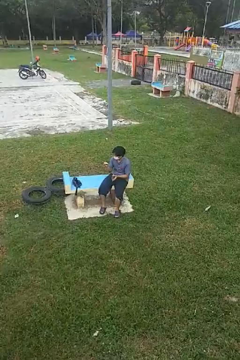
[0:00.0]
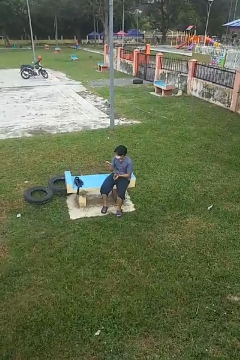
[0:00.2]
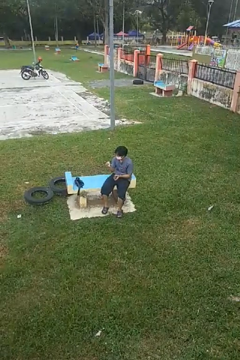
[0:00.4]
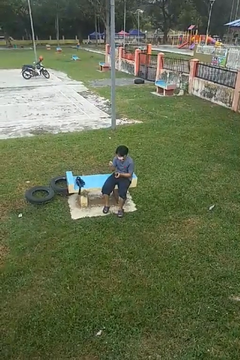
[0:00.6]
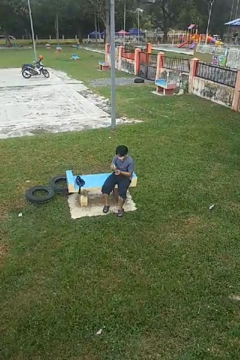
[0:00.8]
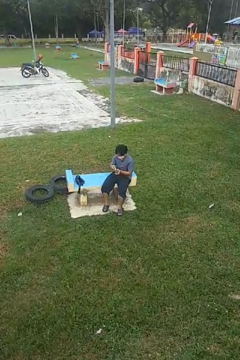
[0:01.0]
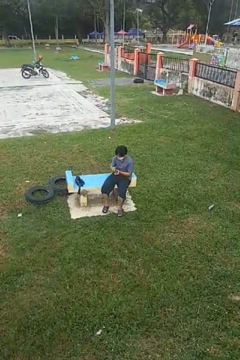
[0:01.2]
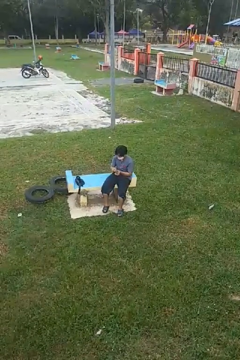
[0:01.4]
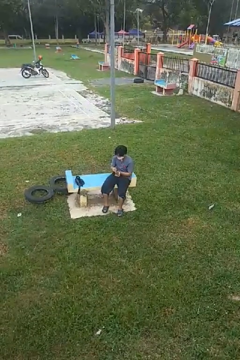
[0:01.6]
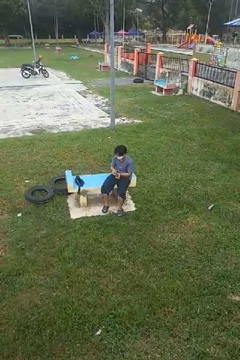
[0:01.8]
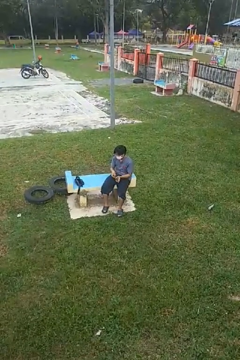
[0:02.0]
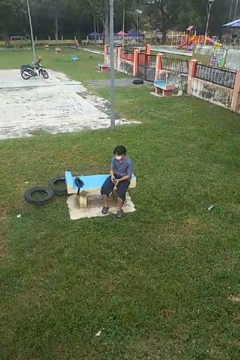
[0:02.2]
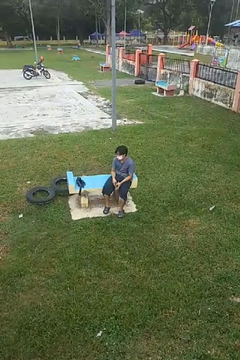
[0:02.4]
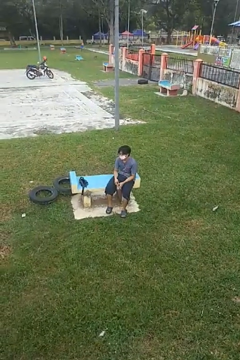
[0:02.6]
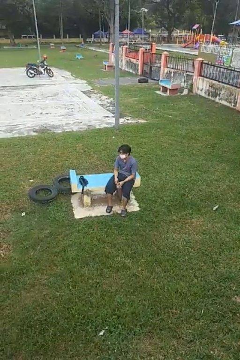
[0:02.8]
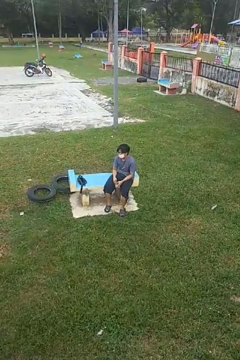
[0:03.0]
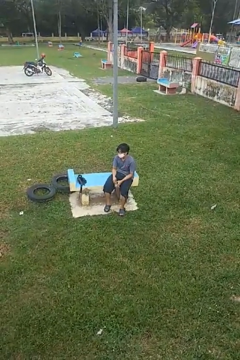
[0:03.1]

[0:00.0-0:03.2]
person puts object into purse

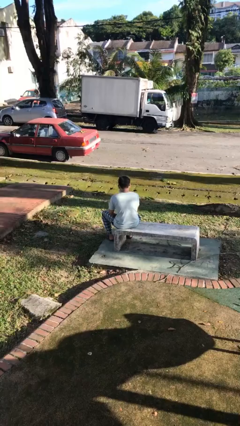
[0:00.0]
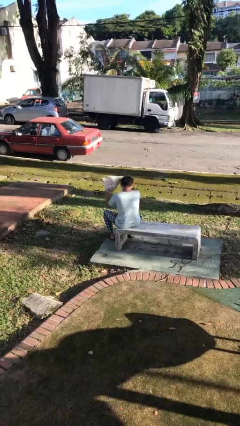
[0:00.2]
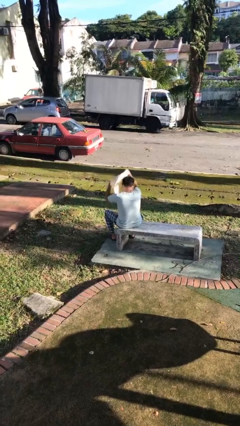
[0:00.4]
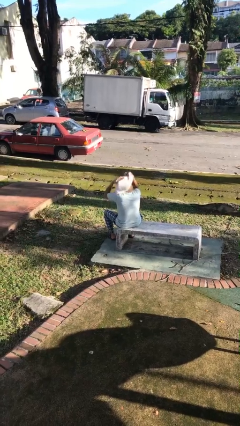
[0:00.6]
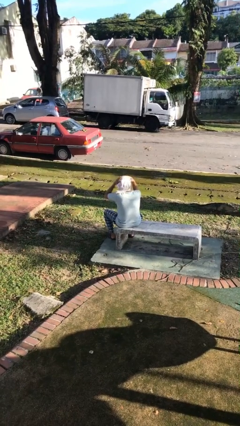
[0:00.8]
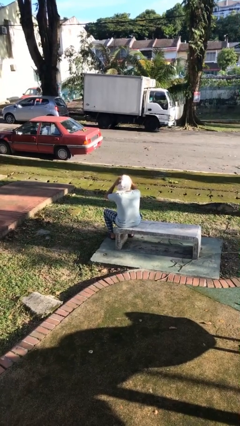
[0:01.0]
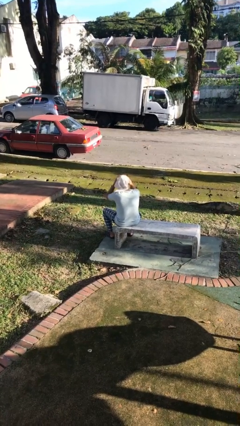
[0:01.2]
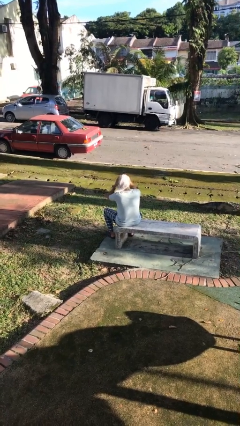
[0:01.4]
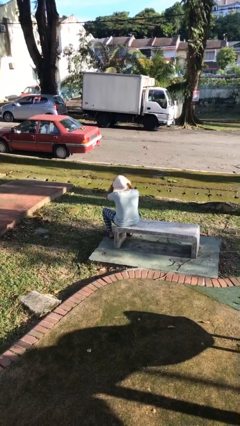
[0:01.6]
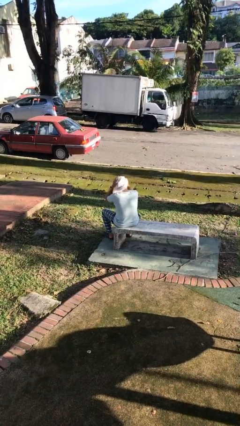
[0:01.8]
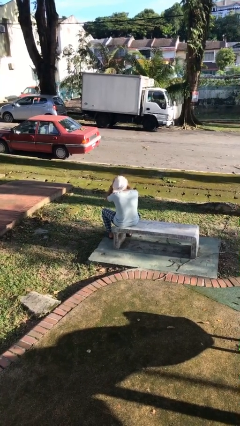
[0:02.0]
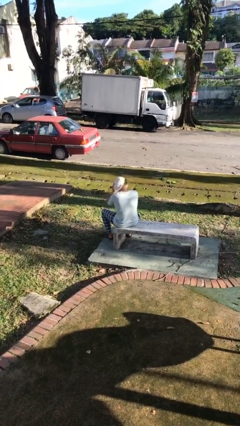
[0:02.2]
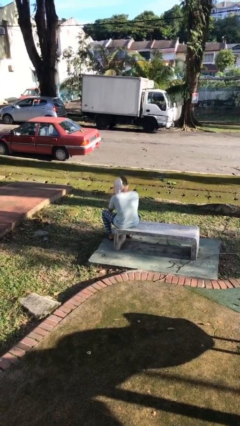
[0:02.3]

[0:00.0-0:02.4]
person dries hair with towel

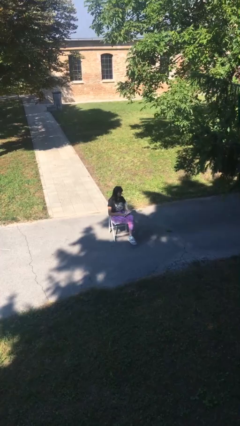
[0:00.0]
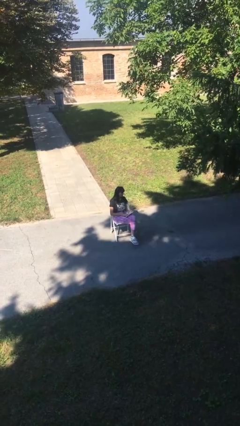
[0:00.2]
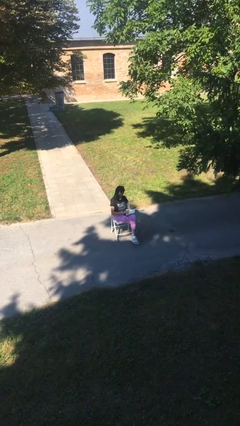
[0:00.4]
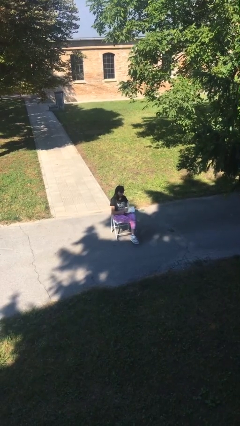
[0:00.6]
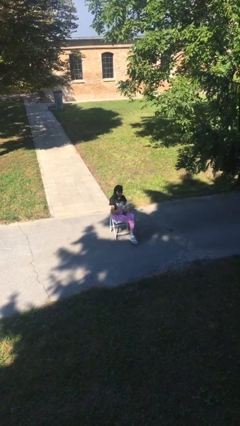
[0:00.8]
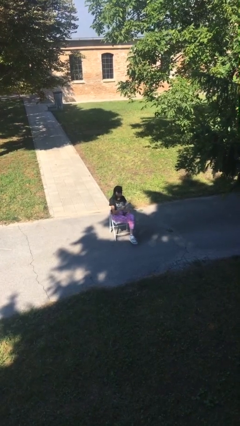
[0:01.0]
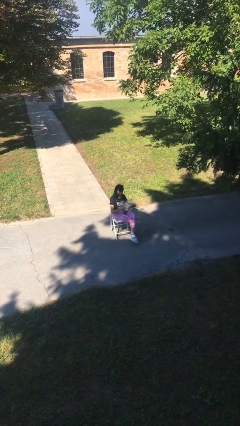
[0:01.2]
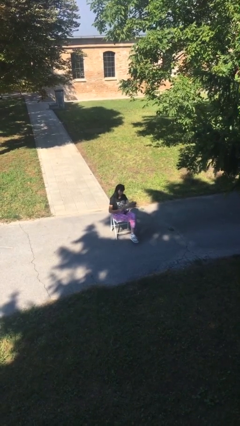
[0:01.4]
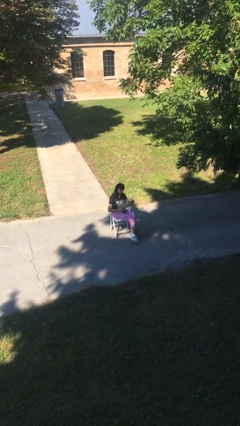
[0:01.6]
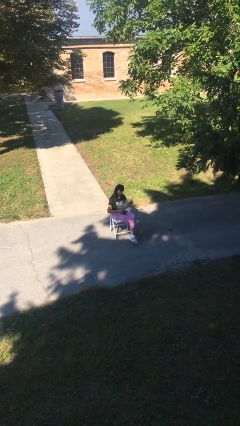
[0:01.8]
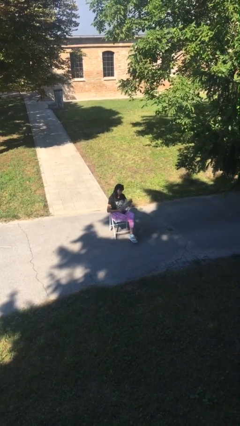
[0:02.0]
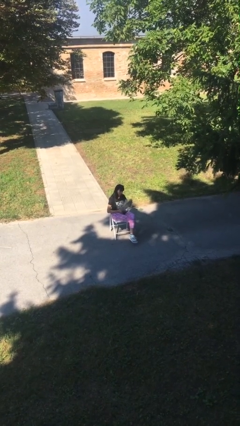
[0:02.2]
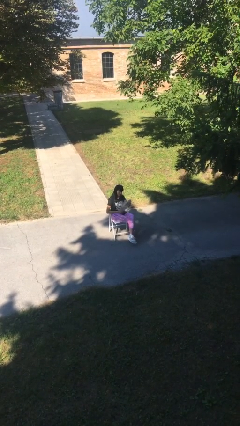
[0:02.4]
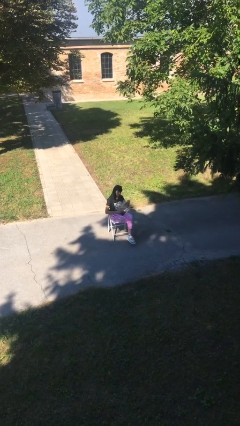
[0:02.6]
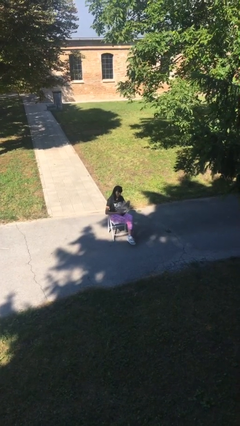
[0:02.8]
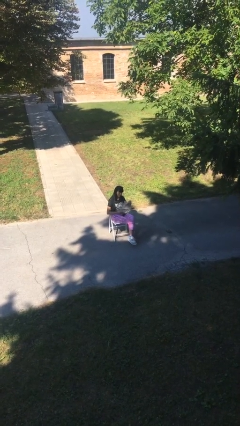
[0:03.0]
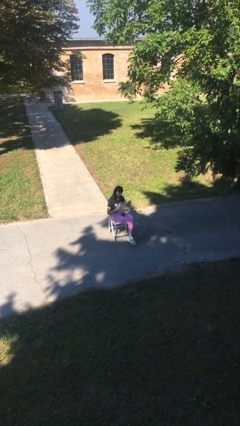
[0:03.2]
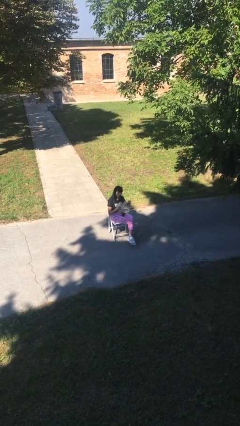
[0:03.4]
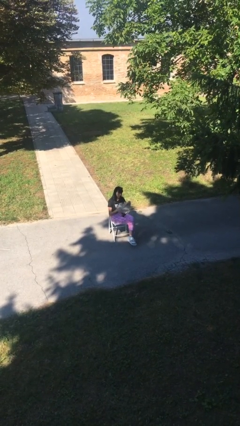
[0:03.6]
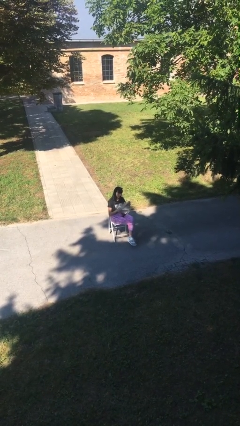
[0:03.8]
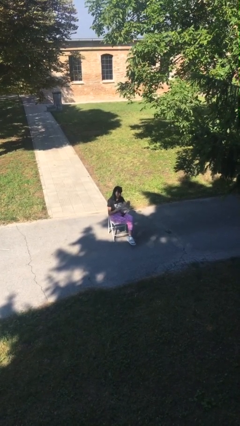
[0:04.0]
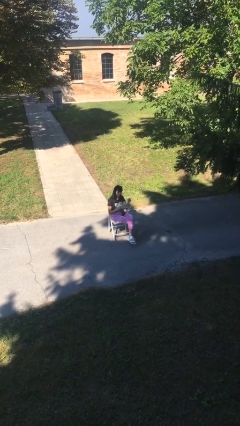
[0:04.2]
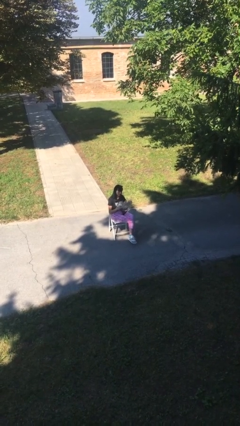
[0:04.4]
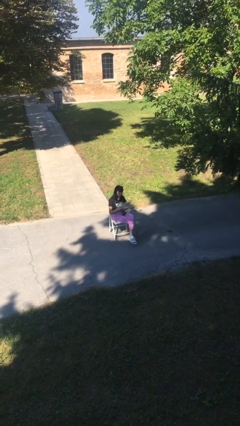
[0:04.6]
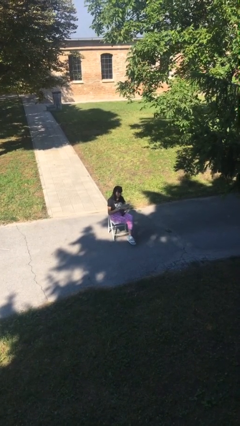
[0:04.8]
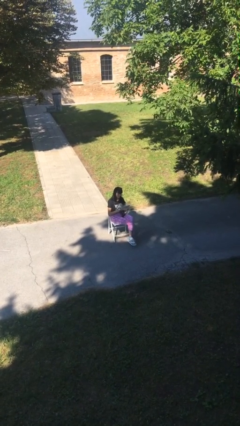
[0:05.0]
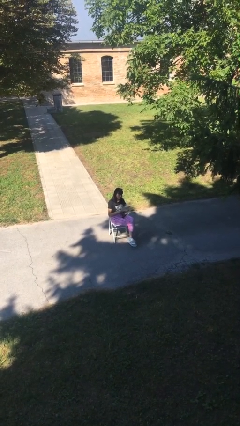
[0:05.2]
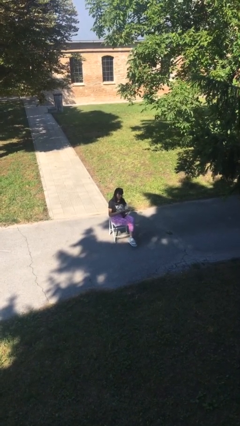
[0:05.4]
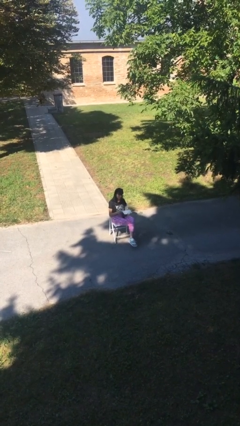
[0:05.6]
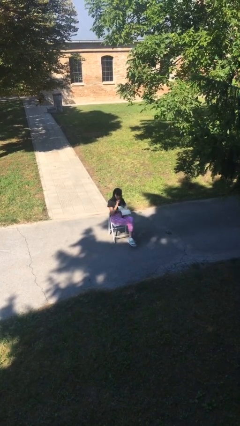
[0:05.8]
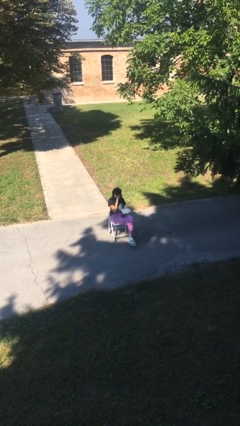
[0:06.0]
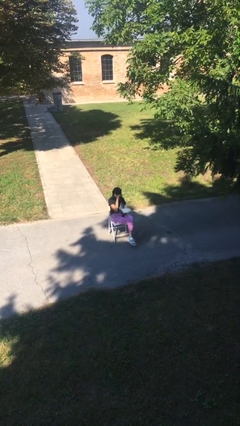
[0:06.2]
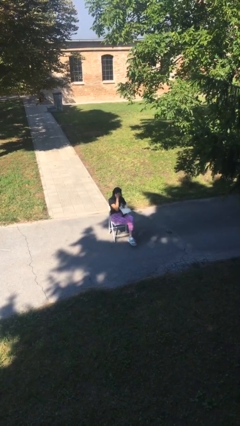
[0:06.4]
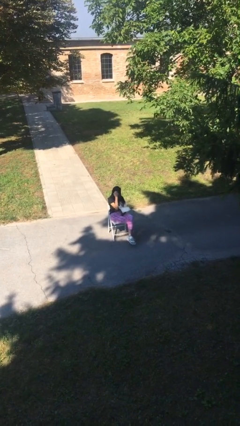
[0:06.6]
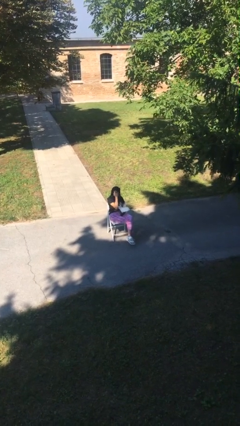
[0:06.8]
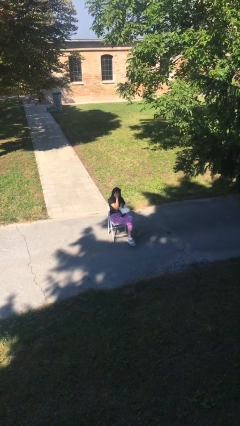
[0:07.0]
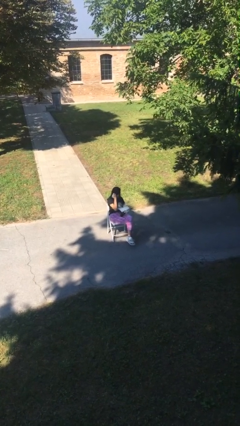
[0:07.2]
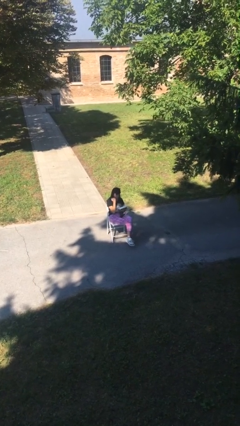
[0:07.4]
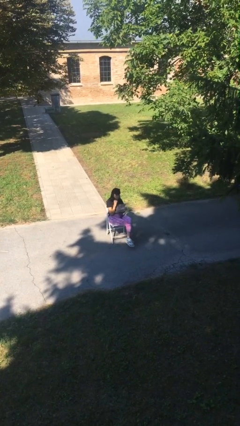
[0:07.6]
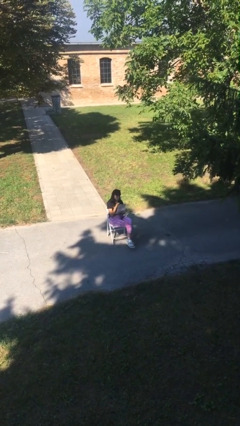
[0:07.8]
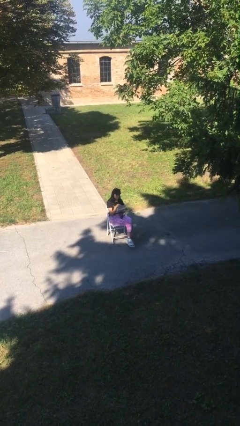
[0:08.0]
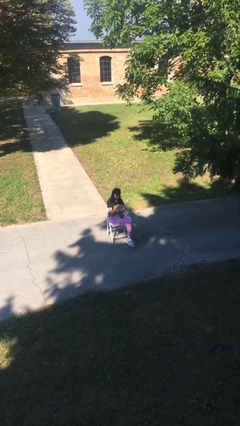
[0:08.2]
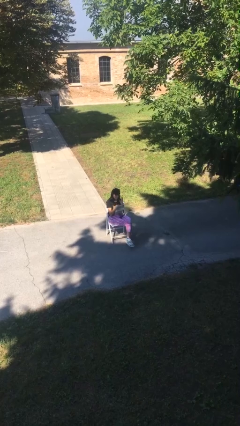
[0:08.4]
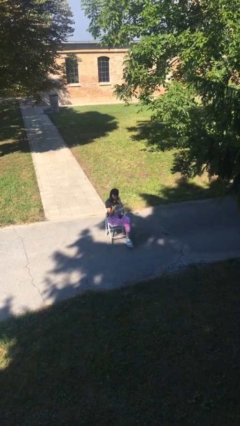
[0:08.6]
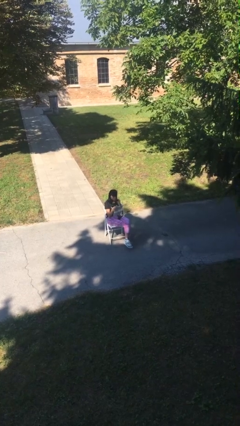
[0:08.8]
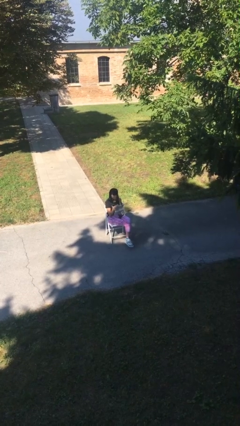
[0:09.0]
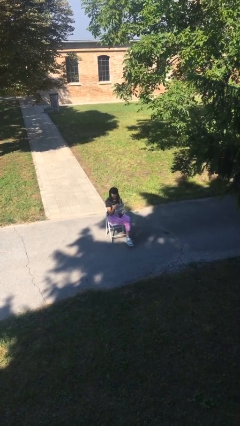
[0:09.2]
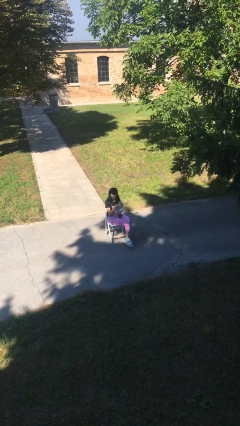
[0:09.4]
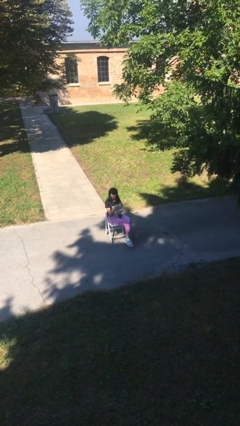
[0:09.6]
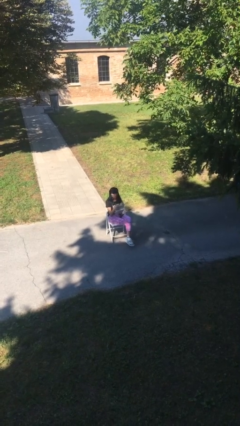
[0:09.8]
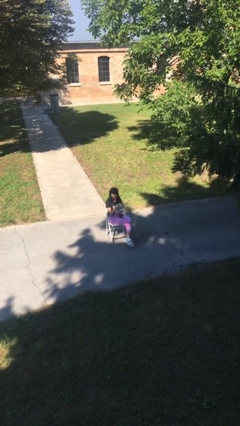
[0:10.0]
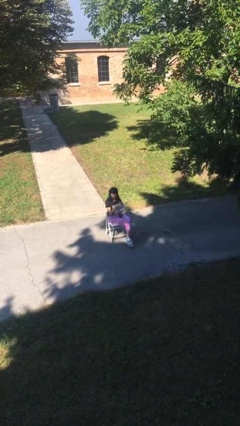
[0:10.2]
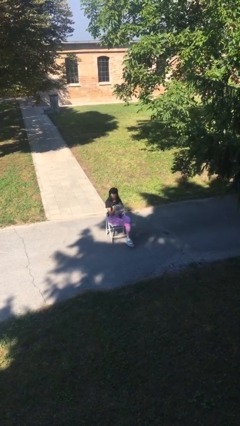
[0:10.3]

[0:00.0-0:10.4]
person reads document

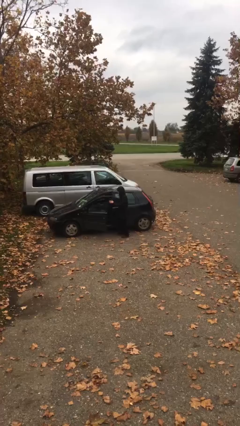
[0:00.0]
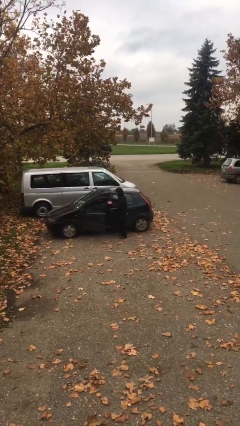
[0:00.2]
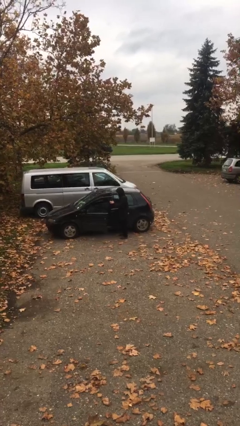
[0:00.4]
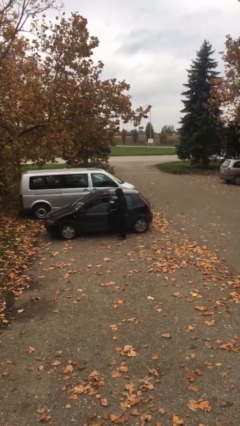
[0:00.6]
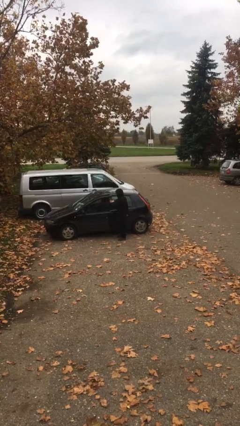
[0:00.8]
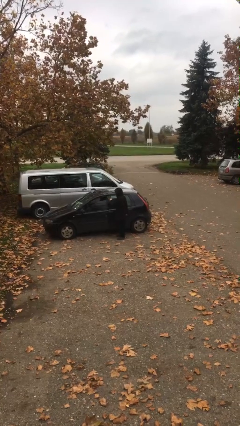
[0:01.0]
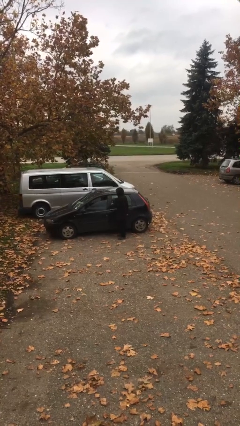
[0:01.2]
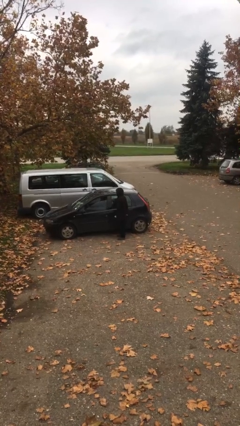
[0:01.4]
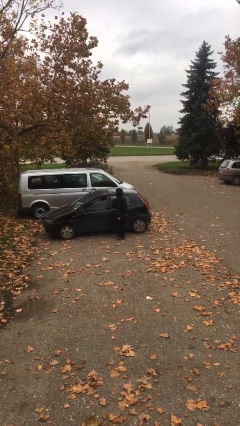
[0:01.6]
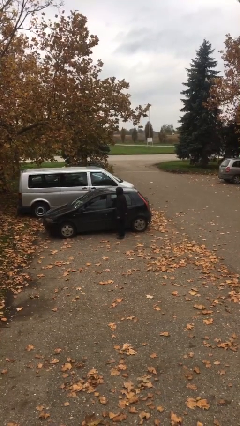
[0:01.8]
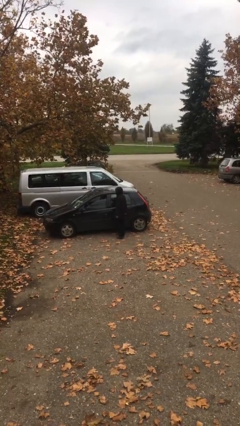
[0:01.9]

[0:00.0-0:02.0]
person closes car door

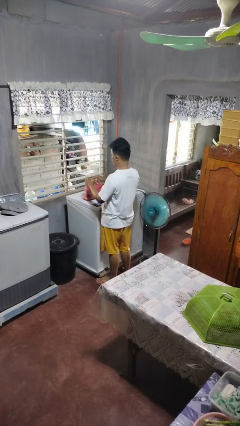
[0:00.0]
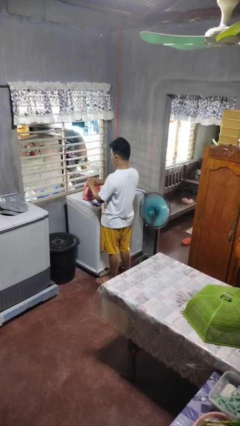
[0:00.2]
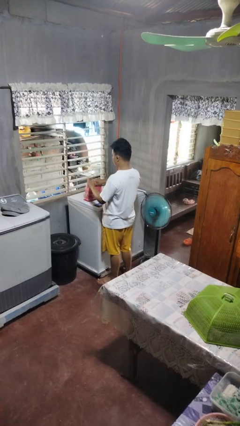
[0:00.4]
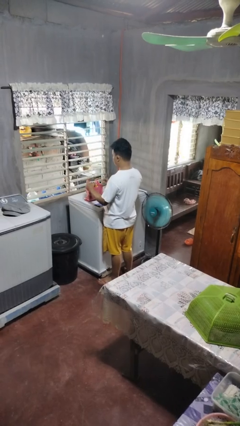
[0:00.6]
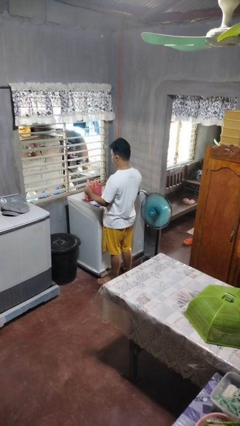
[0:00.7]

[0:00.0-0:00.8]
person puts object into bag
